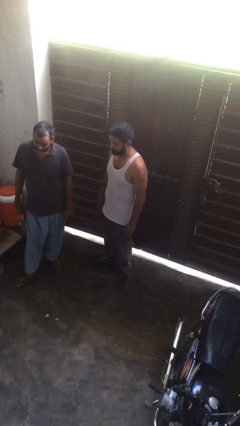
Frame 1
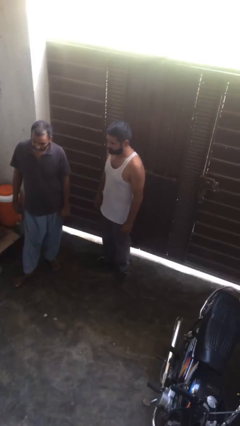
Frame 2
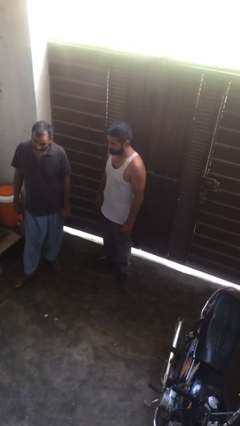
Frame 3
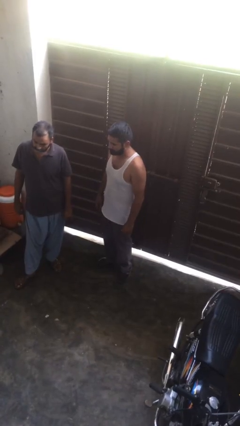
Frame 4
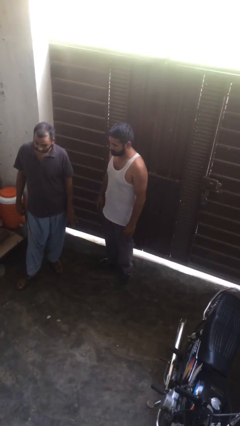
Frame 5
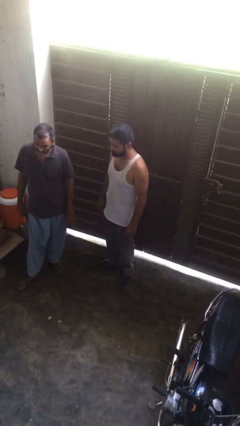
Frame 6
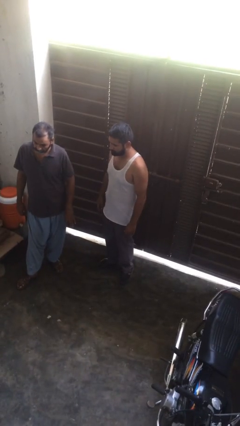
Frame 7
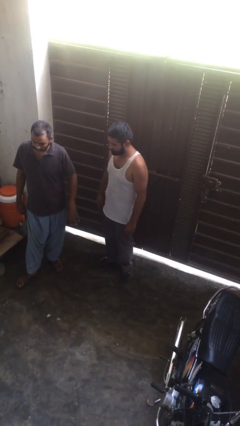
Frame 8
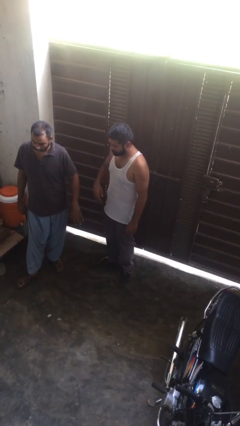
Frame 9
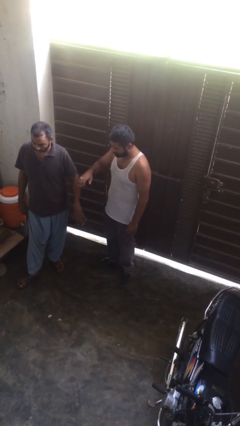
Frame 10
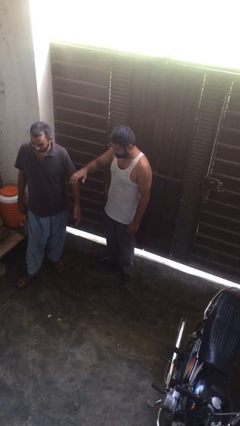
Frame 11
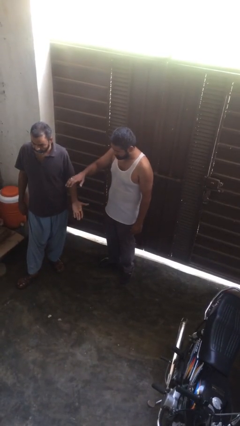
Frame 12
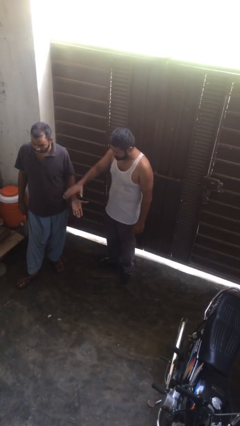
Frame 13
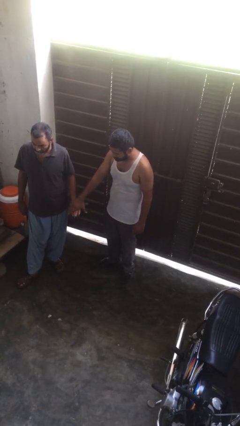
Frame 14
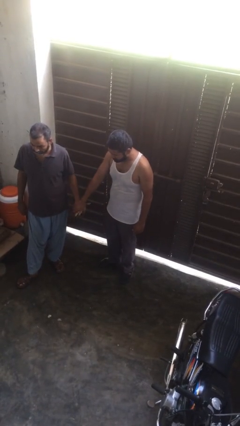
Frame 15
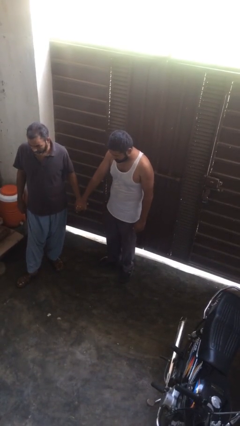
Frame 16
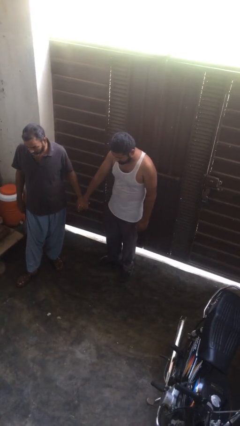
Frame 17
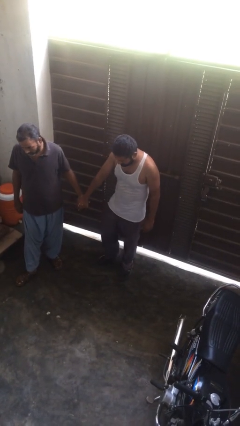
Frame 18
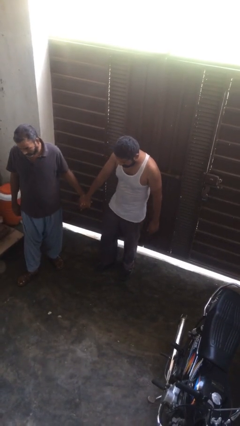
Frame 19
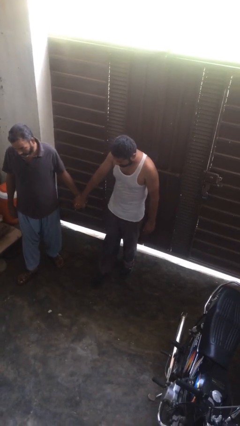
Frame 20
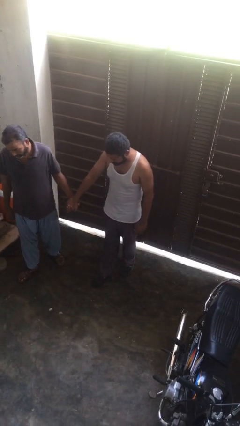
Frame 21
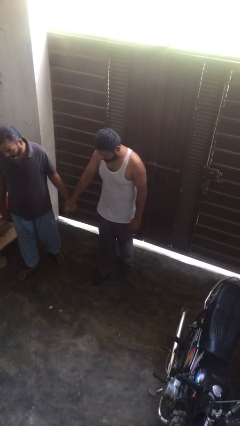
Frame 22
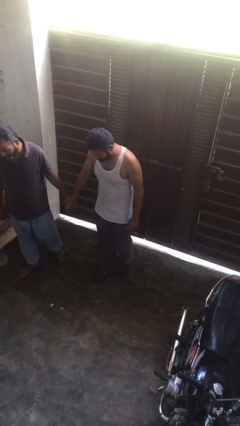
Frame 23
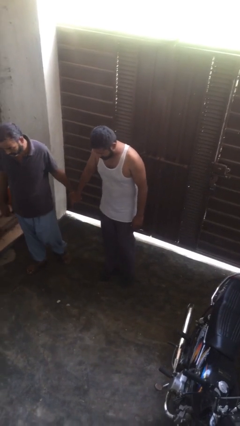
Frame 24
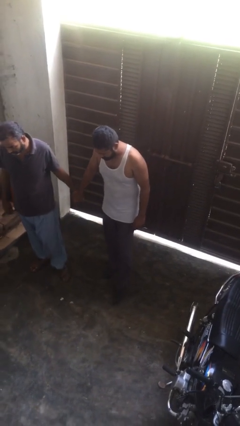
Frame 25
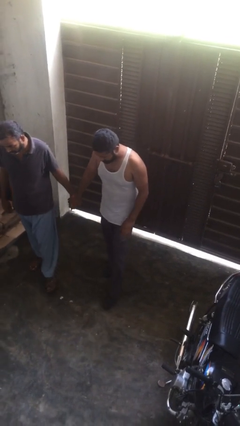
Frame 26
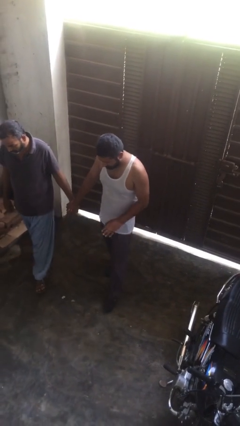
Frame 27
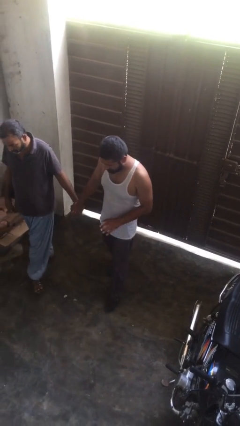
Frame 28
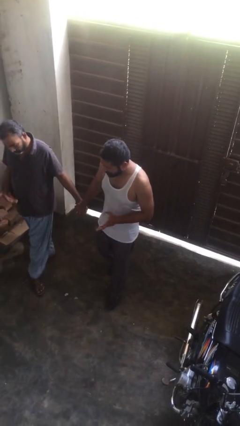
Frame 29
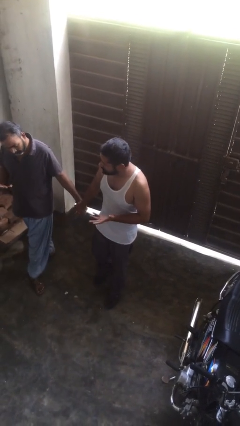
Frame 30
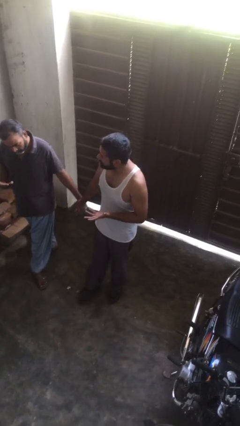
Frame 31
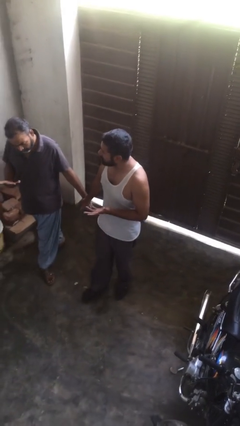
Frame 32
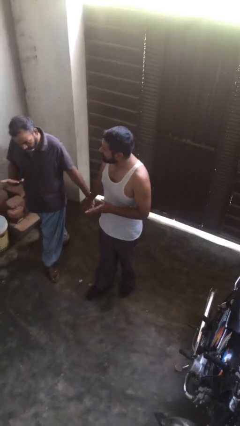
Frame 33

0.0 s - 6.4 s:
person holds hand

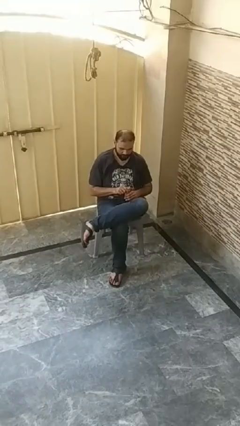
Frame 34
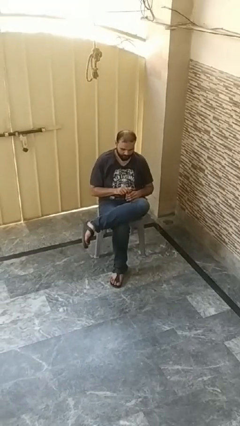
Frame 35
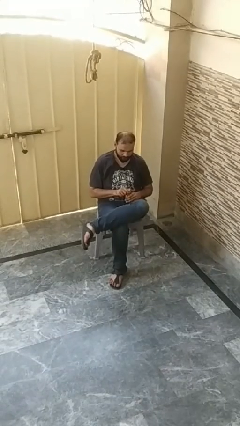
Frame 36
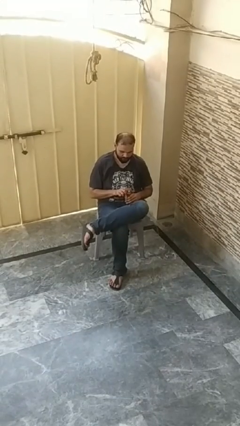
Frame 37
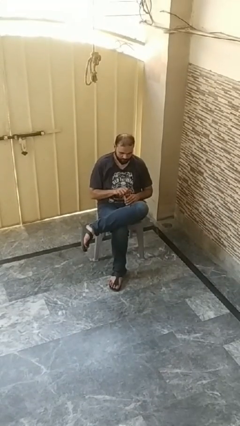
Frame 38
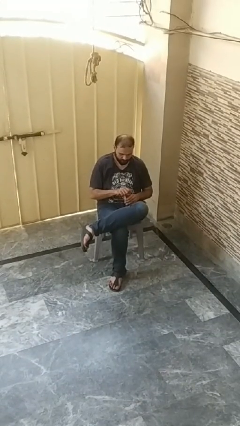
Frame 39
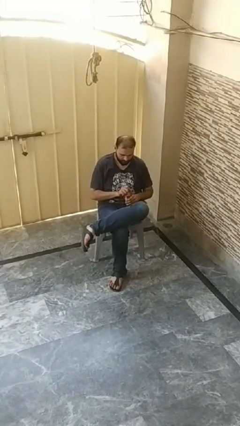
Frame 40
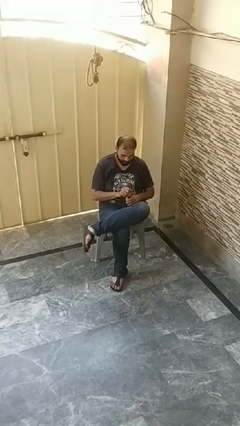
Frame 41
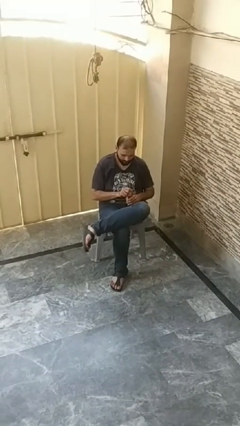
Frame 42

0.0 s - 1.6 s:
person opens beverage can

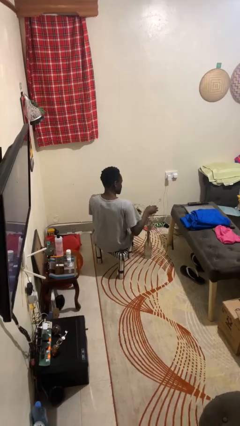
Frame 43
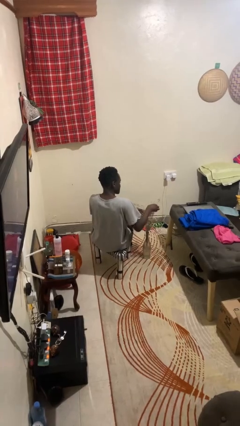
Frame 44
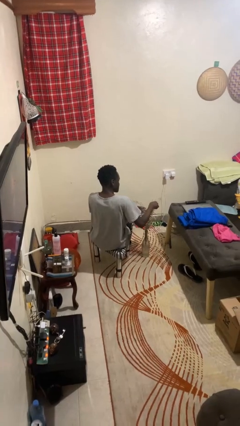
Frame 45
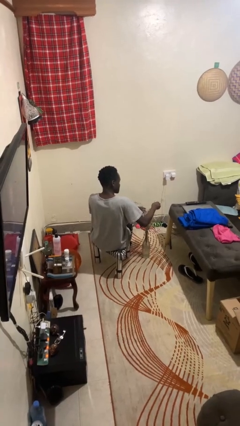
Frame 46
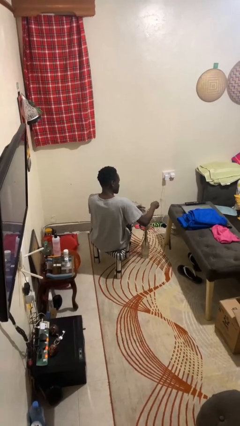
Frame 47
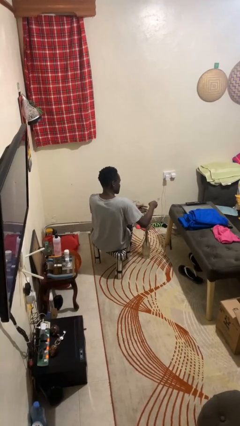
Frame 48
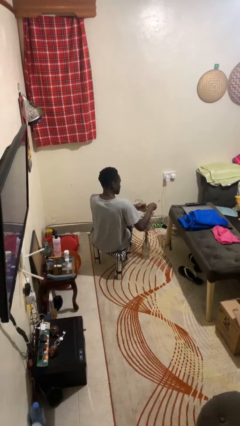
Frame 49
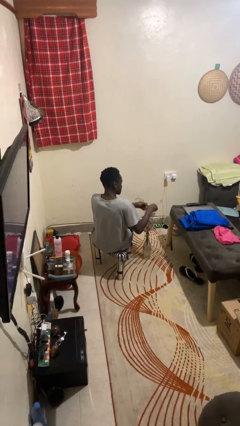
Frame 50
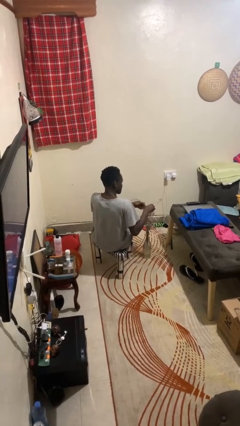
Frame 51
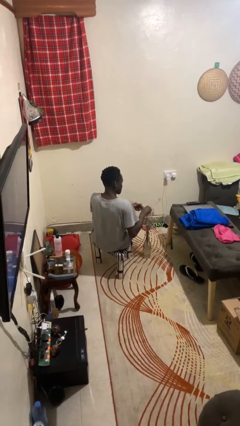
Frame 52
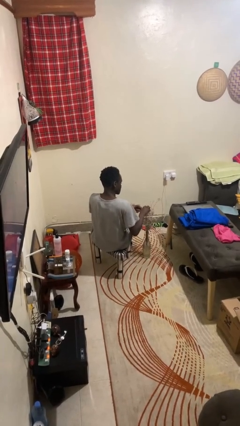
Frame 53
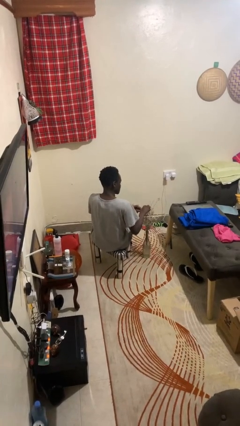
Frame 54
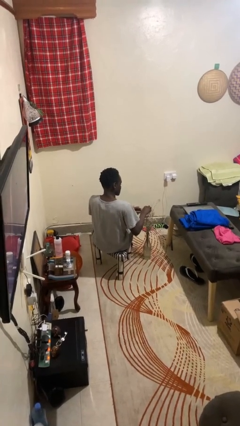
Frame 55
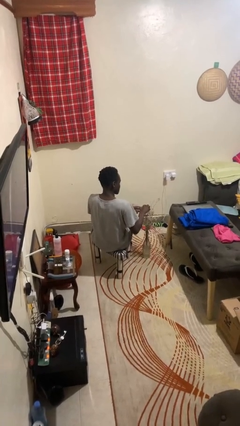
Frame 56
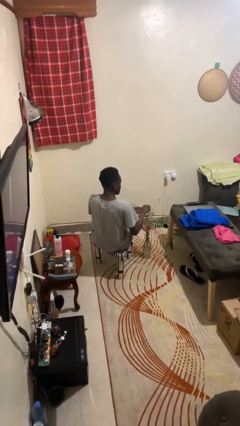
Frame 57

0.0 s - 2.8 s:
person arranges flowers in vase

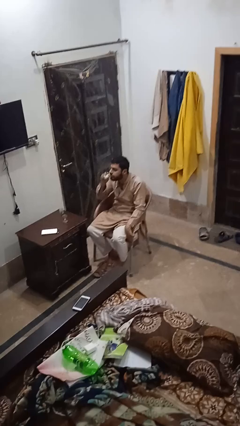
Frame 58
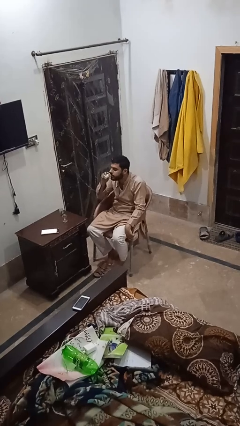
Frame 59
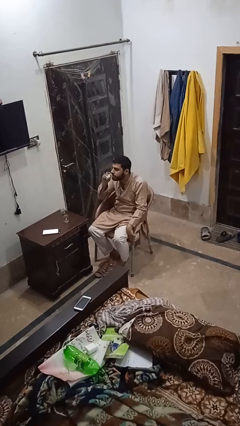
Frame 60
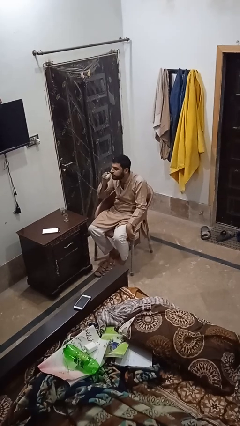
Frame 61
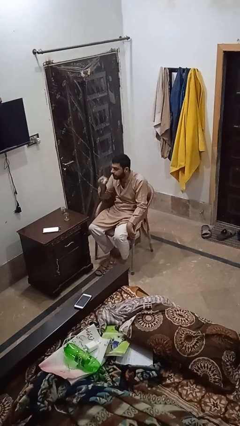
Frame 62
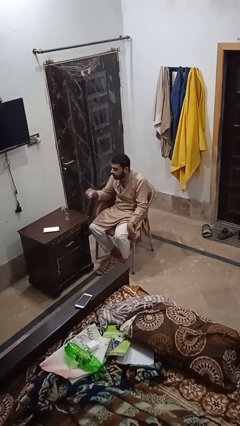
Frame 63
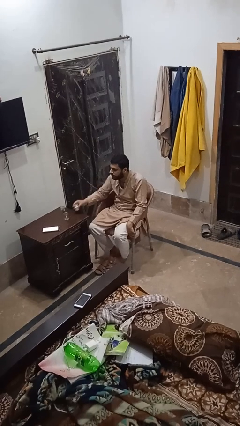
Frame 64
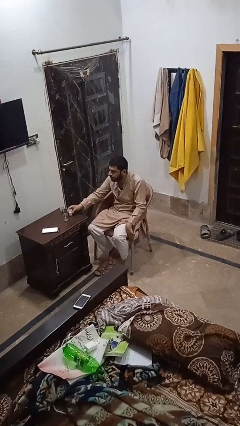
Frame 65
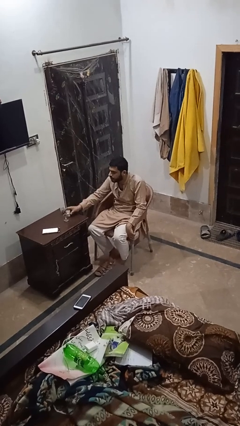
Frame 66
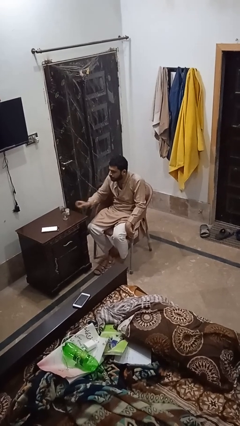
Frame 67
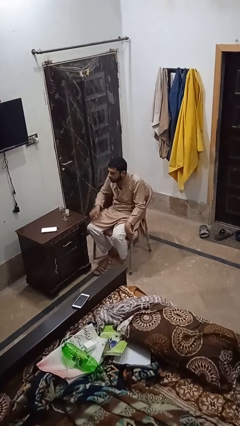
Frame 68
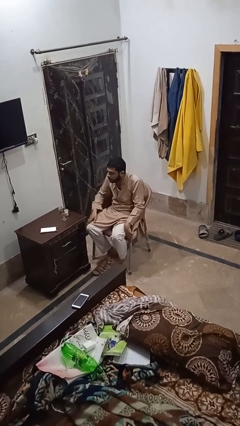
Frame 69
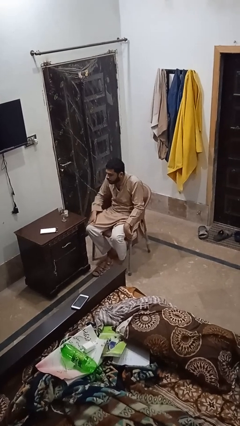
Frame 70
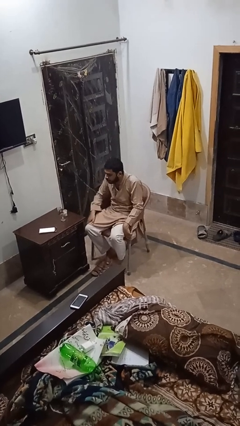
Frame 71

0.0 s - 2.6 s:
person puts down object on table

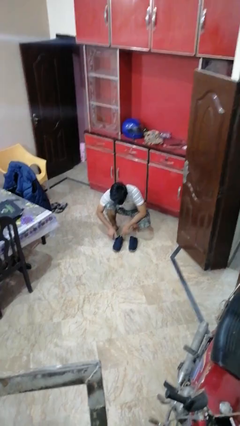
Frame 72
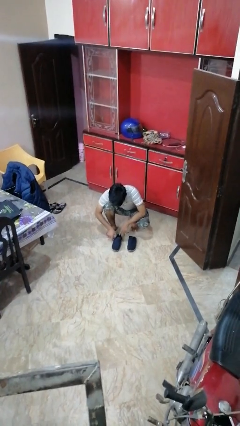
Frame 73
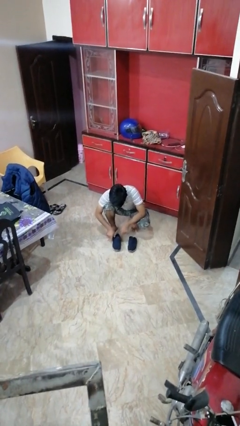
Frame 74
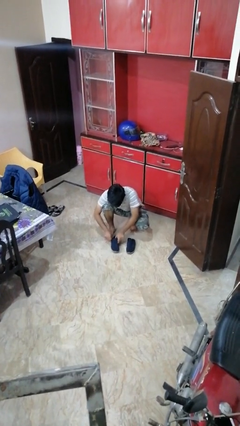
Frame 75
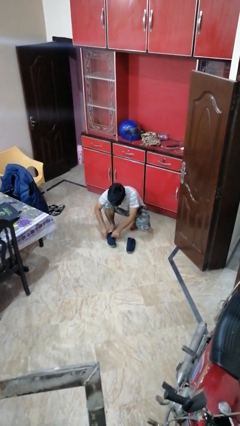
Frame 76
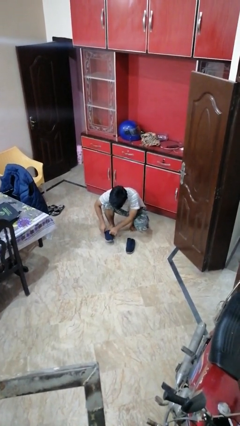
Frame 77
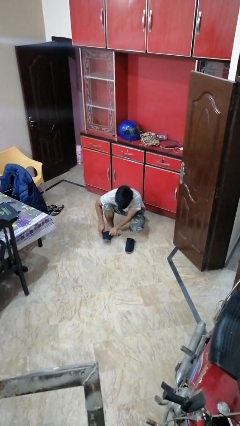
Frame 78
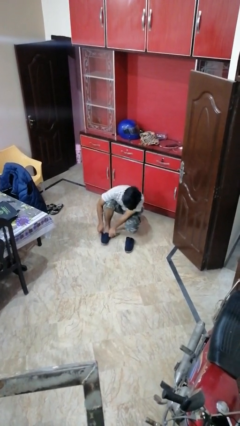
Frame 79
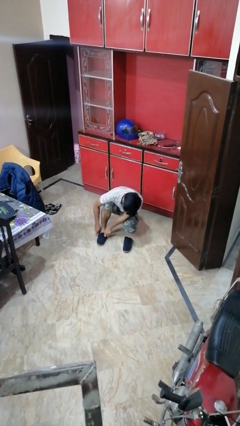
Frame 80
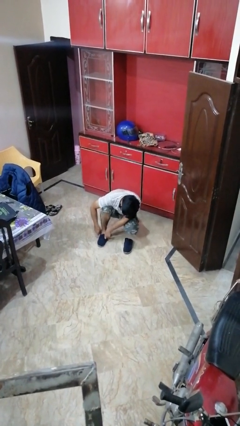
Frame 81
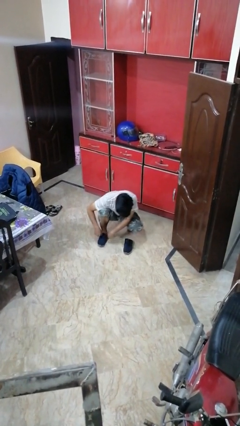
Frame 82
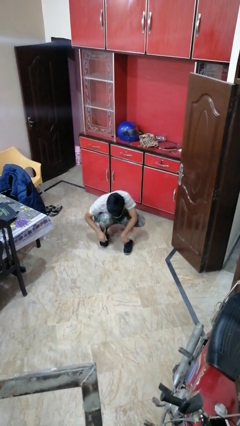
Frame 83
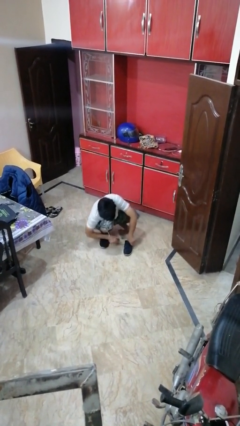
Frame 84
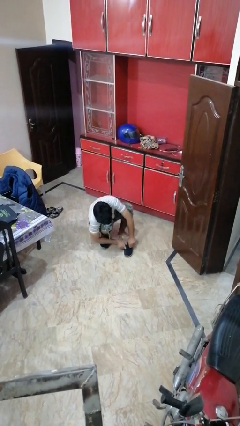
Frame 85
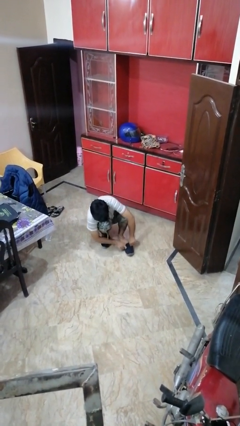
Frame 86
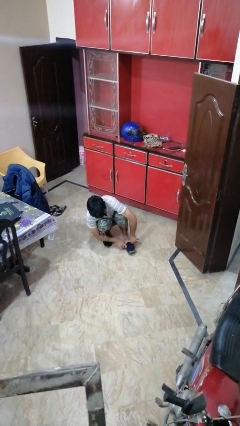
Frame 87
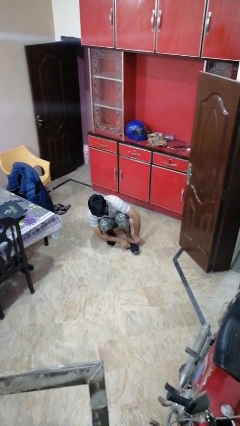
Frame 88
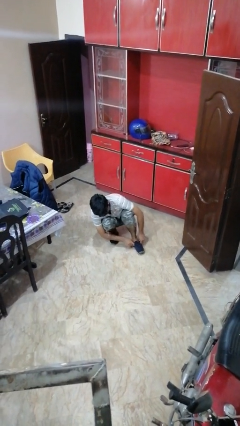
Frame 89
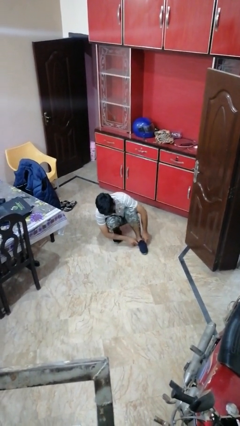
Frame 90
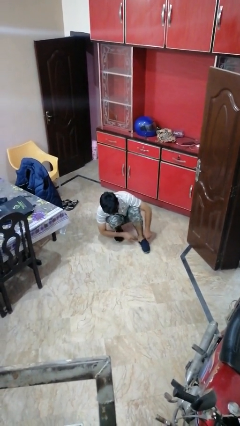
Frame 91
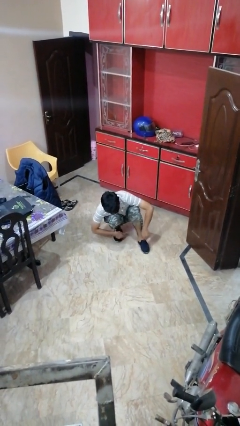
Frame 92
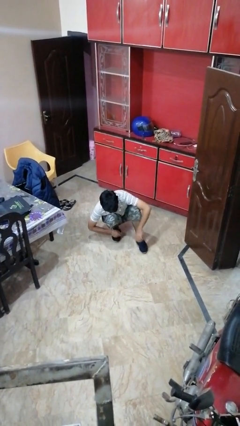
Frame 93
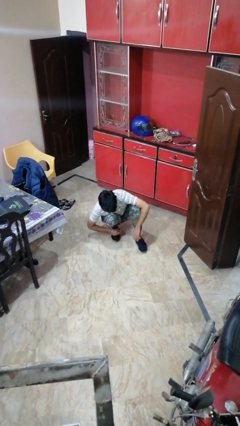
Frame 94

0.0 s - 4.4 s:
person puts on shoes

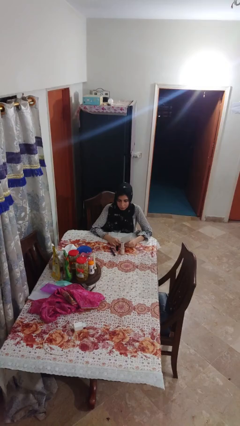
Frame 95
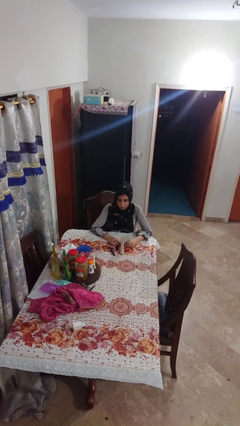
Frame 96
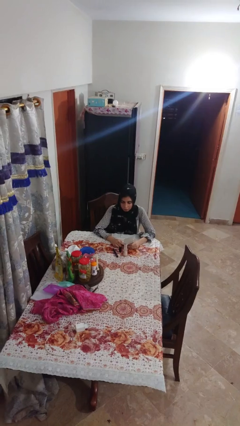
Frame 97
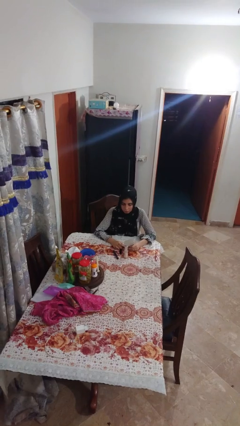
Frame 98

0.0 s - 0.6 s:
person applies lip makeup
